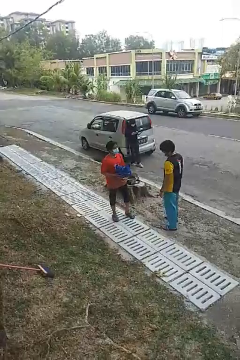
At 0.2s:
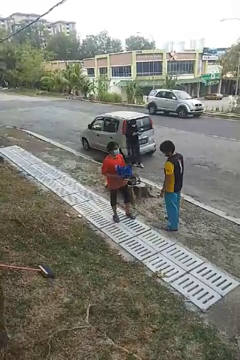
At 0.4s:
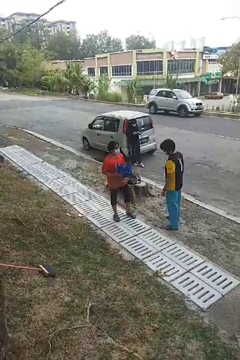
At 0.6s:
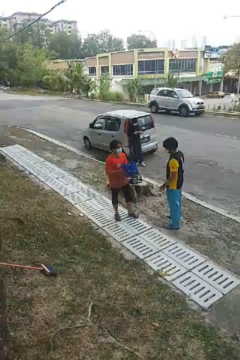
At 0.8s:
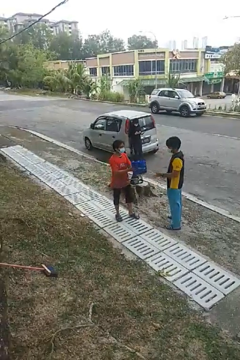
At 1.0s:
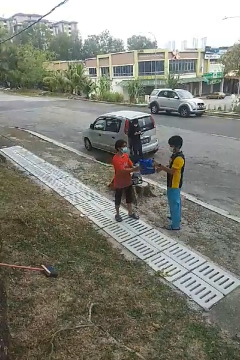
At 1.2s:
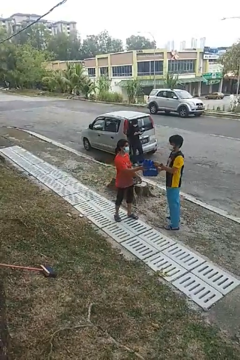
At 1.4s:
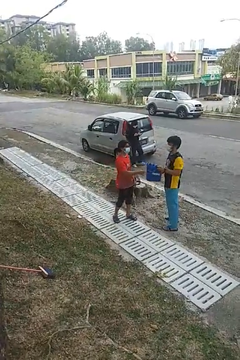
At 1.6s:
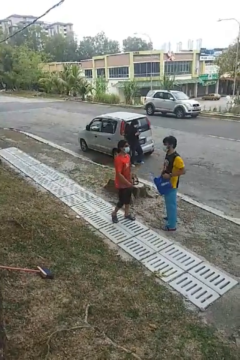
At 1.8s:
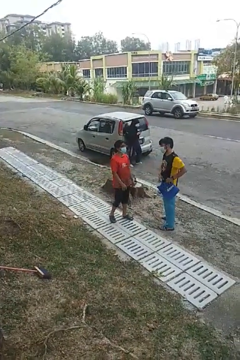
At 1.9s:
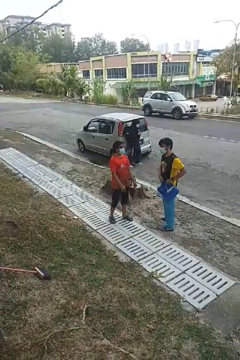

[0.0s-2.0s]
person transfers object to person

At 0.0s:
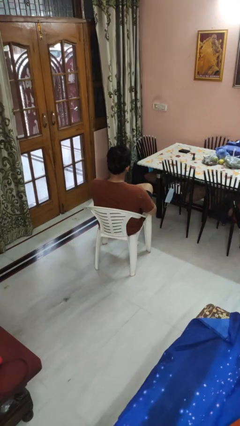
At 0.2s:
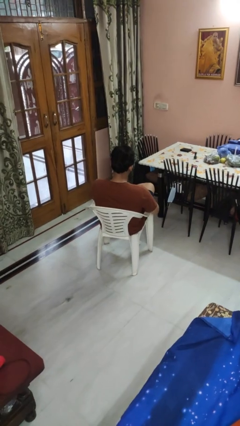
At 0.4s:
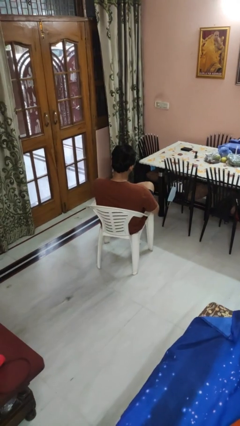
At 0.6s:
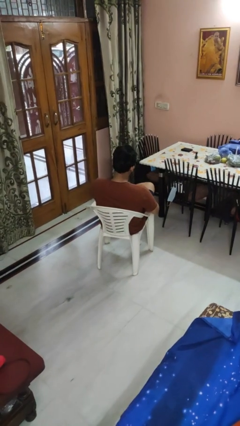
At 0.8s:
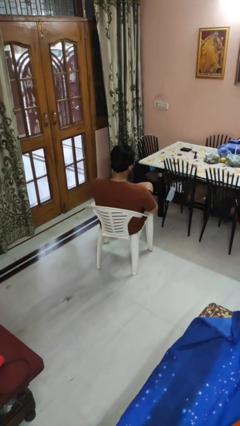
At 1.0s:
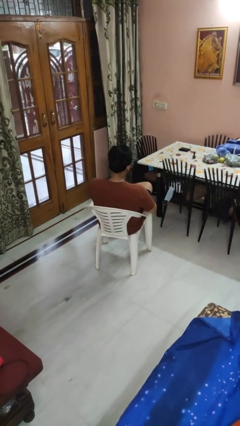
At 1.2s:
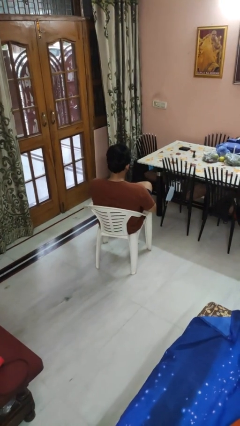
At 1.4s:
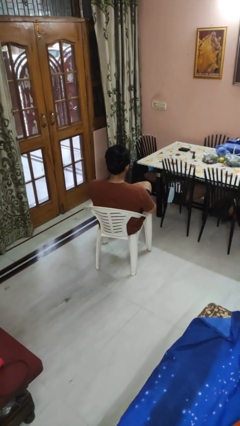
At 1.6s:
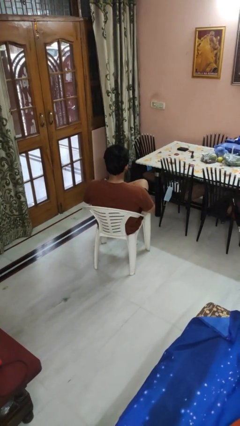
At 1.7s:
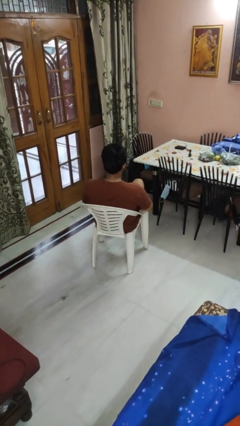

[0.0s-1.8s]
person rubs foot

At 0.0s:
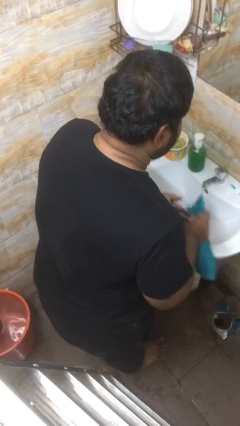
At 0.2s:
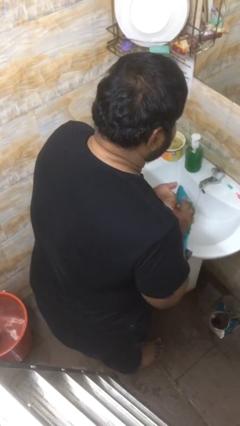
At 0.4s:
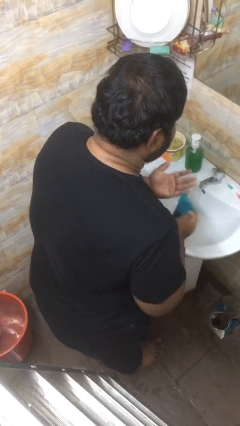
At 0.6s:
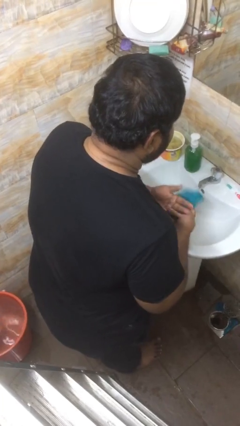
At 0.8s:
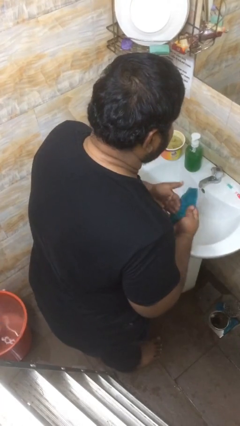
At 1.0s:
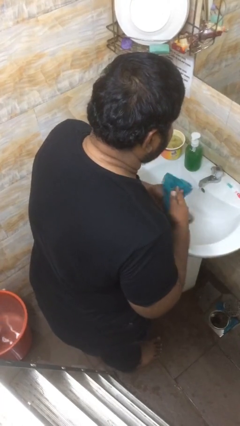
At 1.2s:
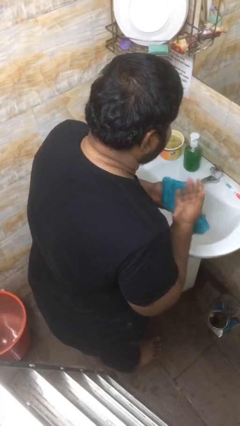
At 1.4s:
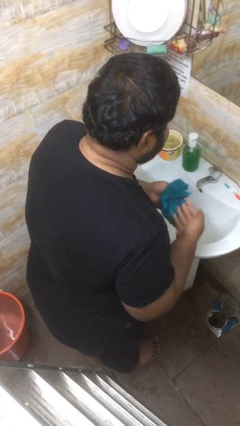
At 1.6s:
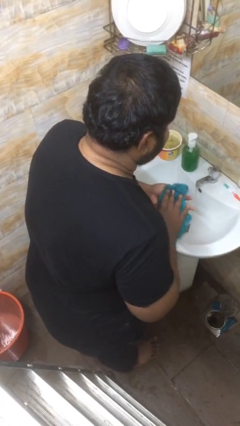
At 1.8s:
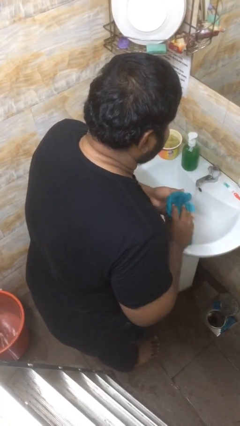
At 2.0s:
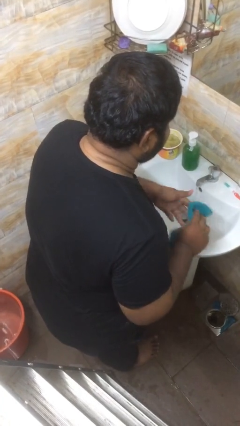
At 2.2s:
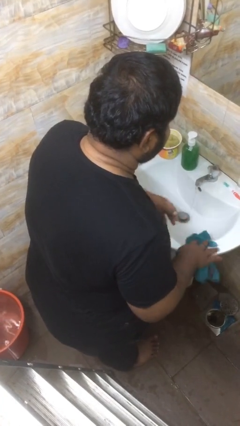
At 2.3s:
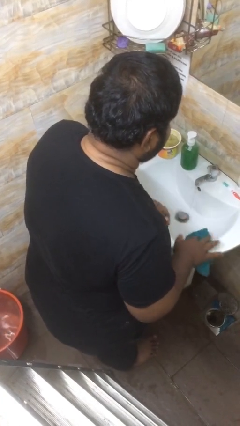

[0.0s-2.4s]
person dries hands with towel

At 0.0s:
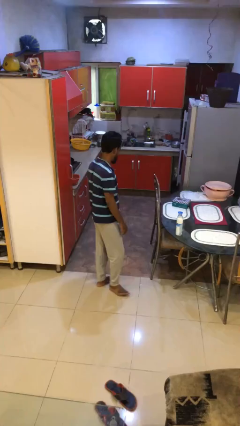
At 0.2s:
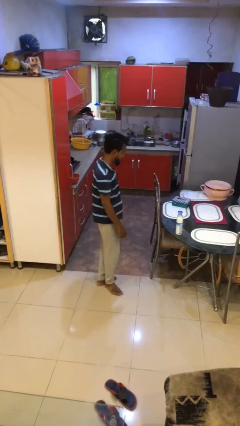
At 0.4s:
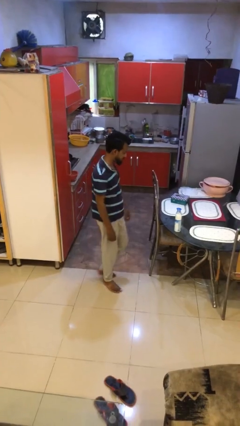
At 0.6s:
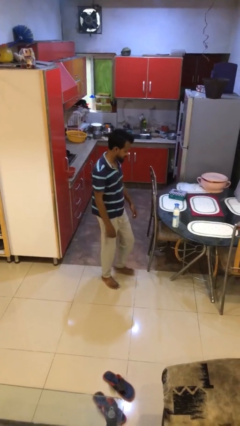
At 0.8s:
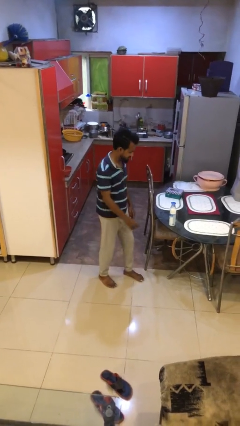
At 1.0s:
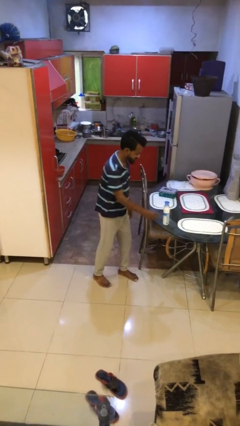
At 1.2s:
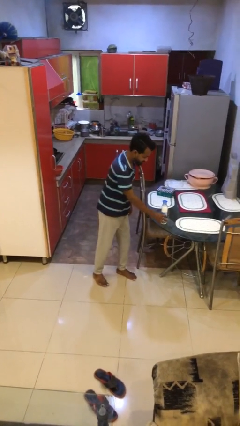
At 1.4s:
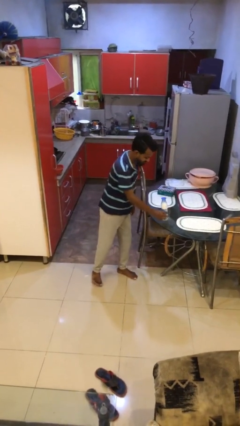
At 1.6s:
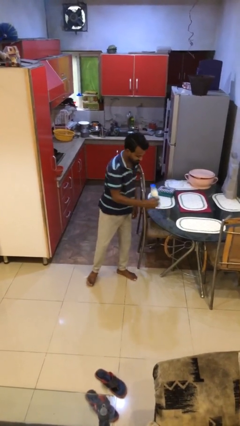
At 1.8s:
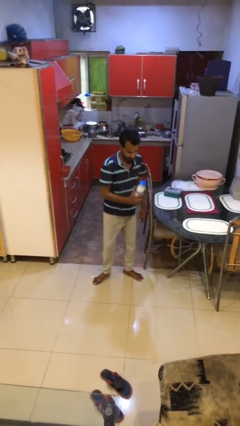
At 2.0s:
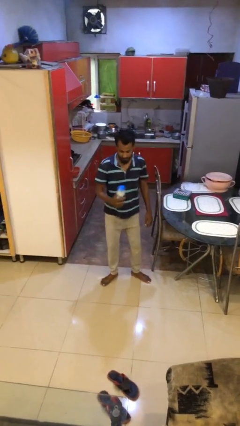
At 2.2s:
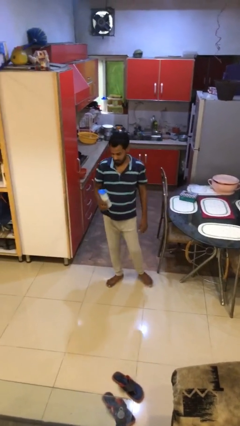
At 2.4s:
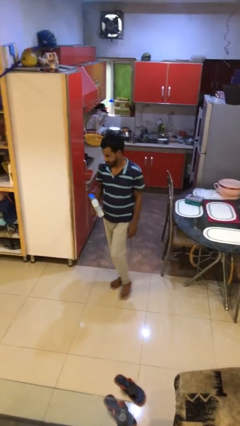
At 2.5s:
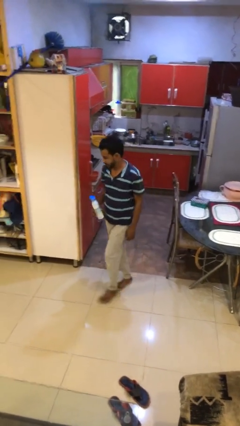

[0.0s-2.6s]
person picks up object from table

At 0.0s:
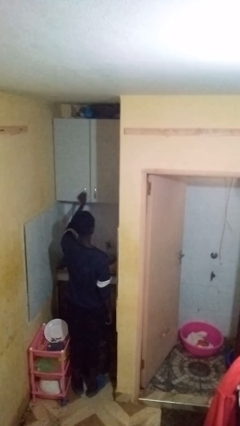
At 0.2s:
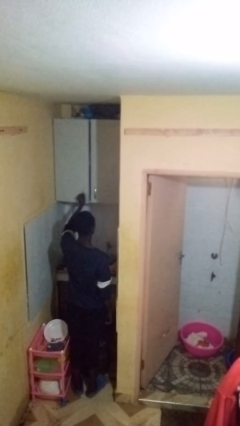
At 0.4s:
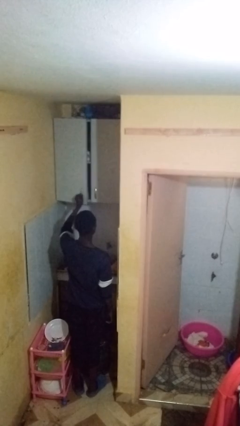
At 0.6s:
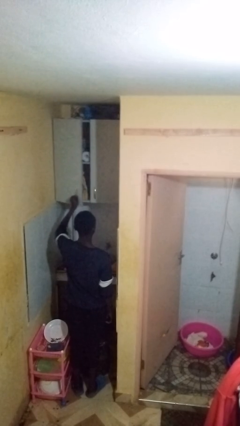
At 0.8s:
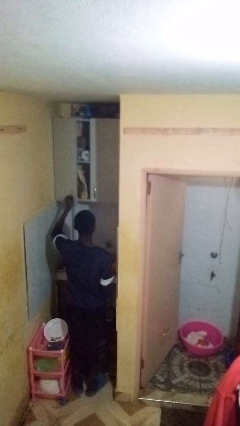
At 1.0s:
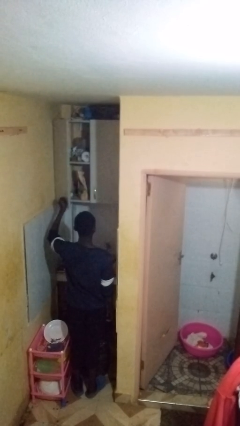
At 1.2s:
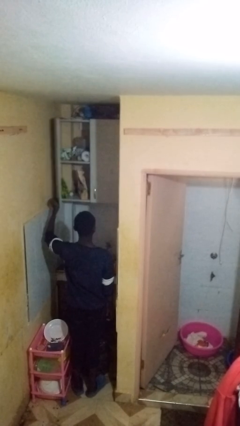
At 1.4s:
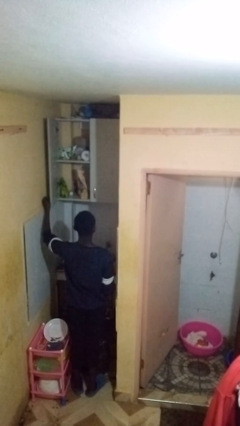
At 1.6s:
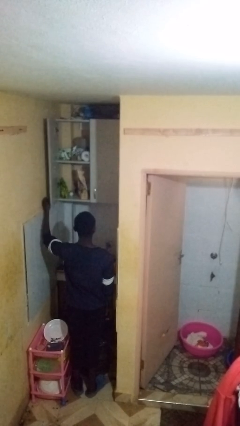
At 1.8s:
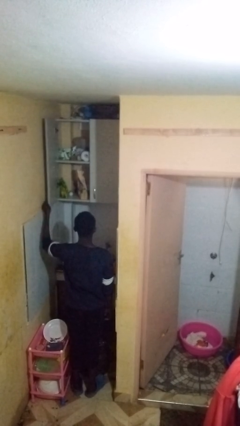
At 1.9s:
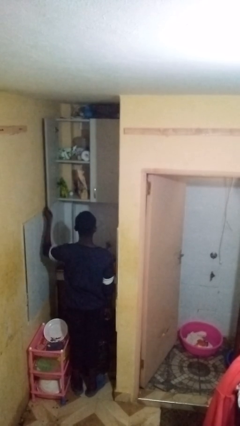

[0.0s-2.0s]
person opens cabinet

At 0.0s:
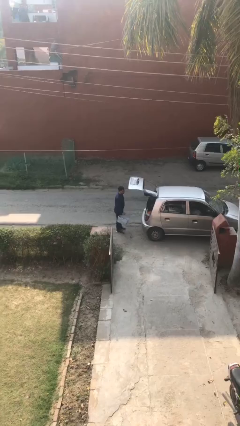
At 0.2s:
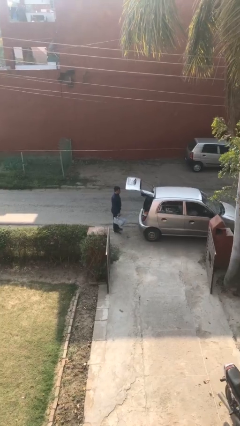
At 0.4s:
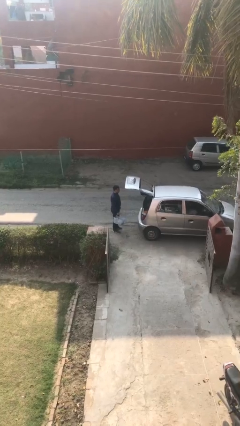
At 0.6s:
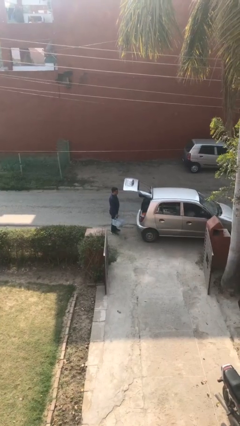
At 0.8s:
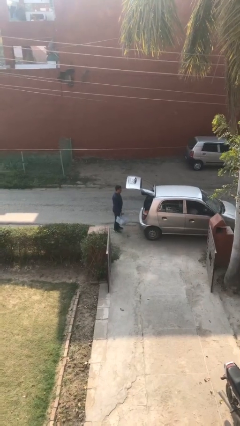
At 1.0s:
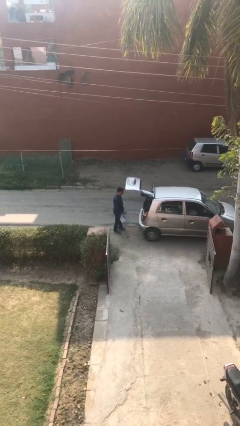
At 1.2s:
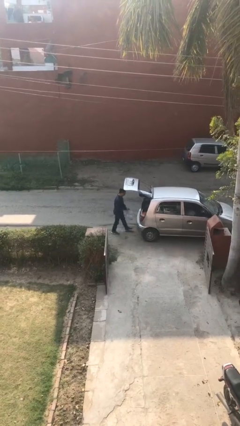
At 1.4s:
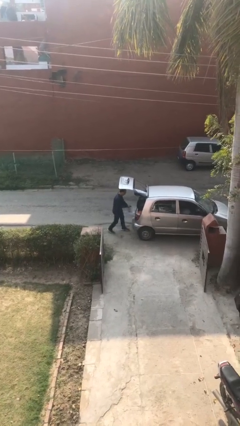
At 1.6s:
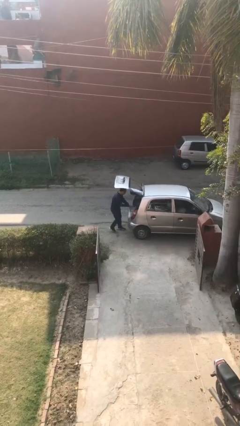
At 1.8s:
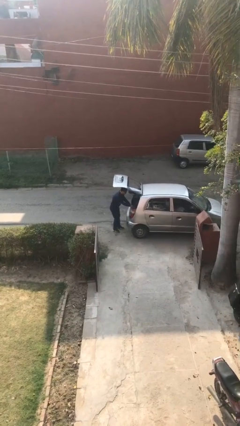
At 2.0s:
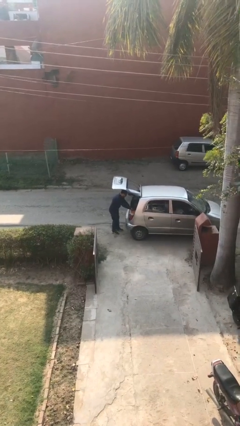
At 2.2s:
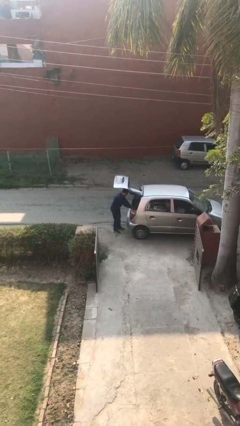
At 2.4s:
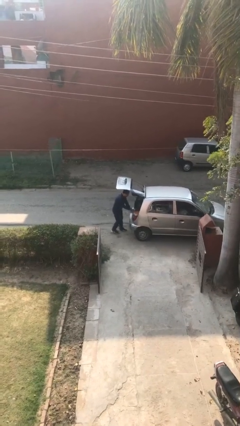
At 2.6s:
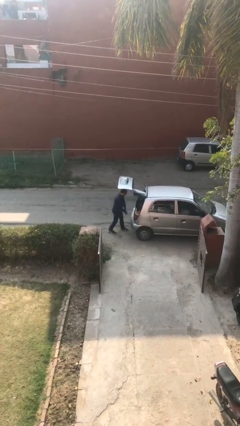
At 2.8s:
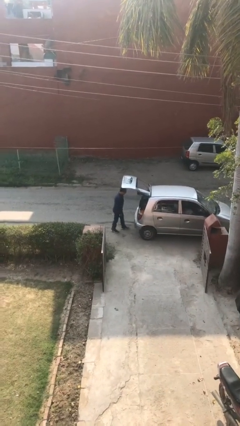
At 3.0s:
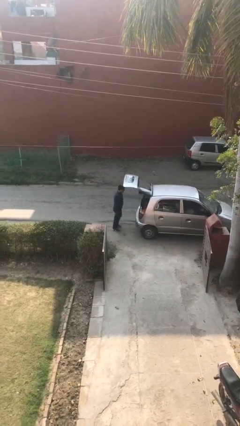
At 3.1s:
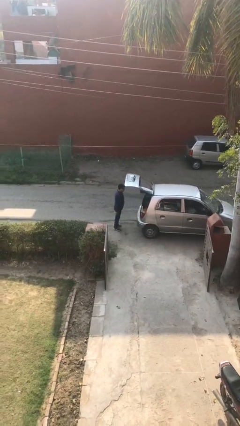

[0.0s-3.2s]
person loads car

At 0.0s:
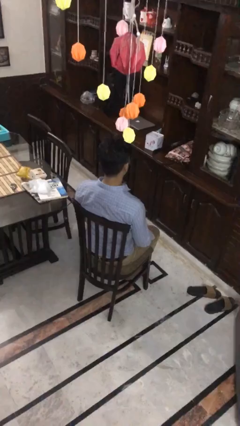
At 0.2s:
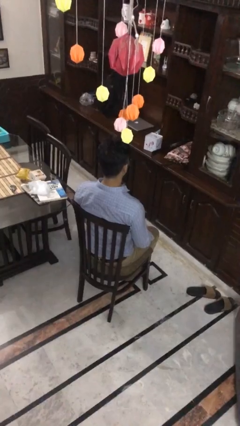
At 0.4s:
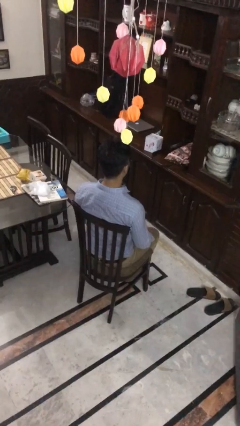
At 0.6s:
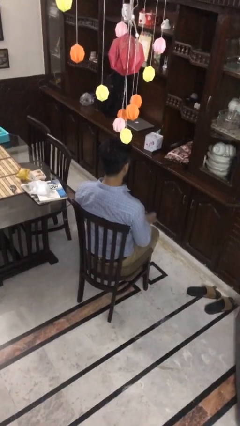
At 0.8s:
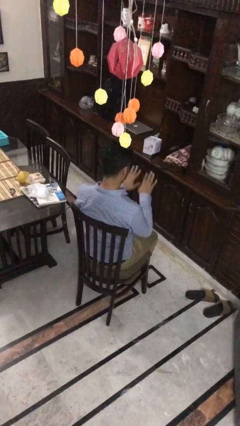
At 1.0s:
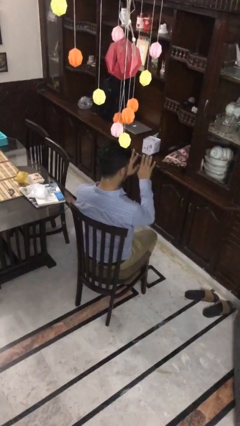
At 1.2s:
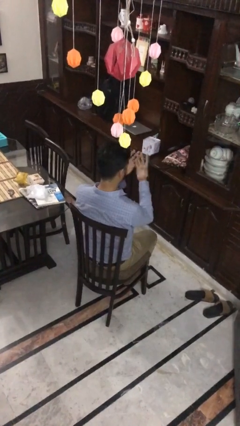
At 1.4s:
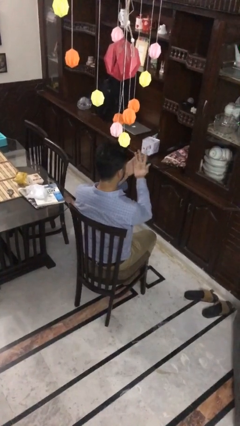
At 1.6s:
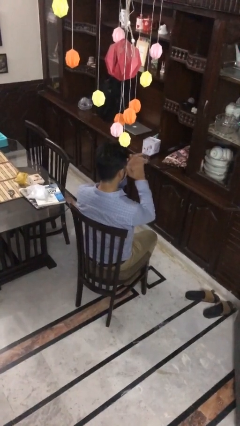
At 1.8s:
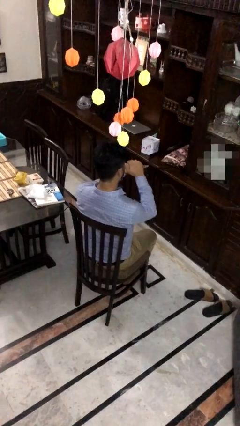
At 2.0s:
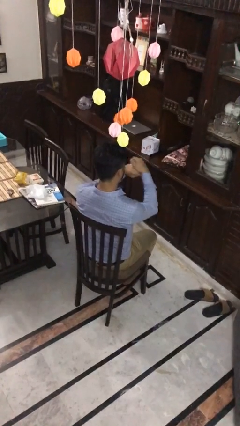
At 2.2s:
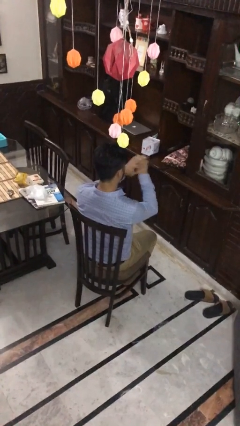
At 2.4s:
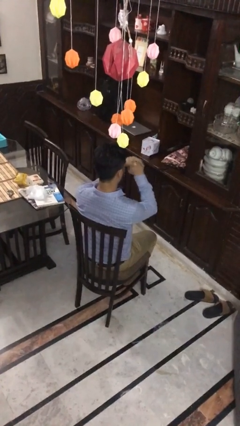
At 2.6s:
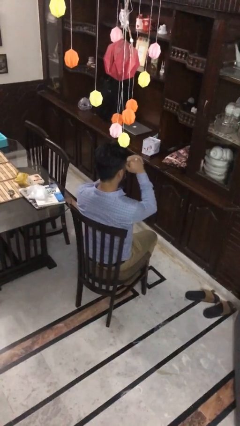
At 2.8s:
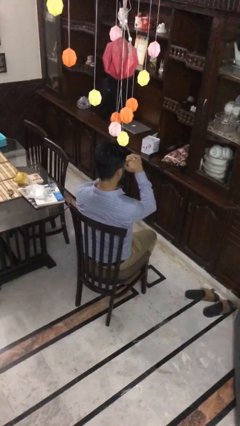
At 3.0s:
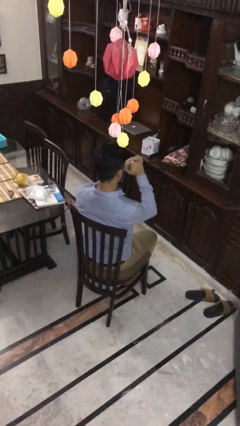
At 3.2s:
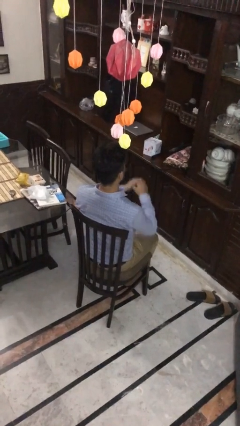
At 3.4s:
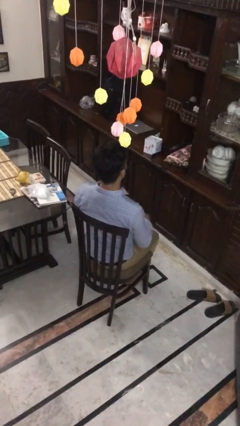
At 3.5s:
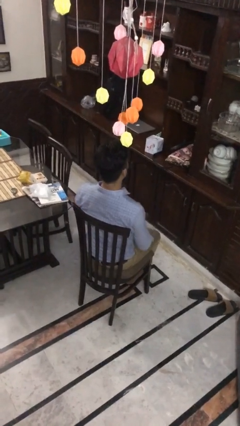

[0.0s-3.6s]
person looks at hands in lap
